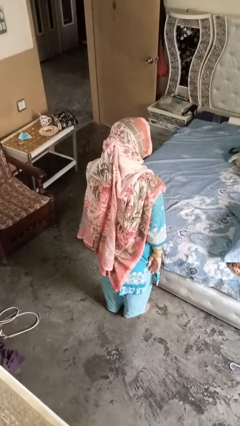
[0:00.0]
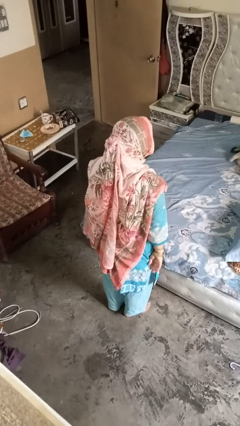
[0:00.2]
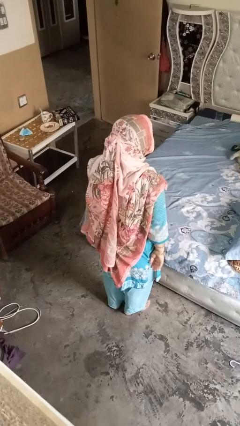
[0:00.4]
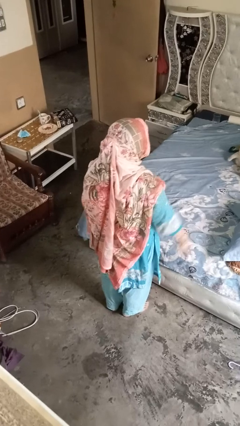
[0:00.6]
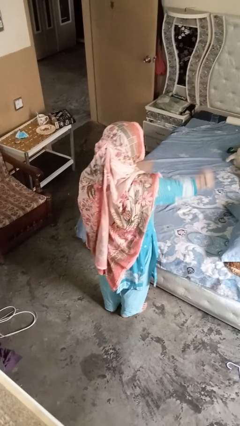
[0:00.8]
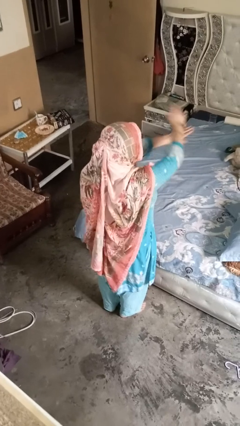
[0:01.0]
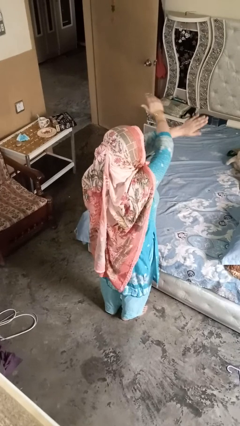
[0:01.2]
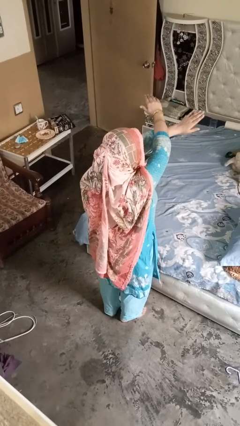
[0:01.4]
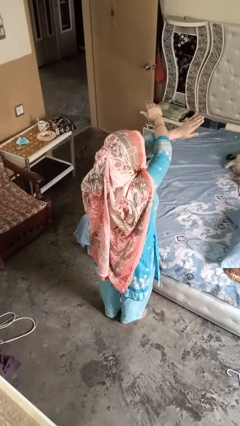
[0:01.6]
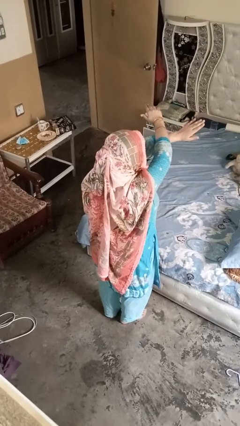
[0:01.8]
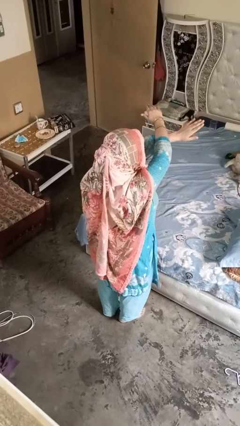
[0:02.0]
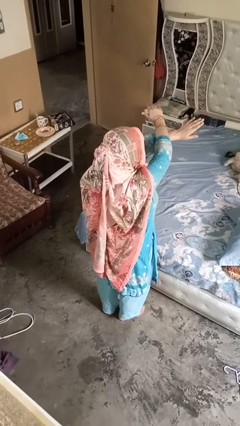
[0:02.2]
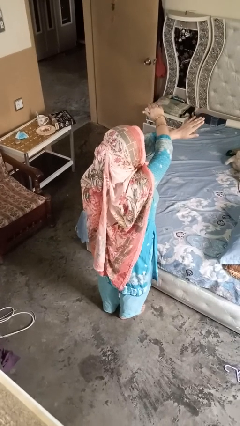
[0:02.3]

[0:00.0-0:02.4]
person gestures arms x

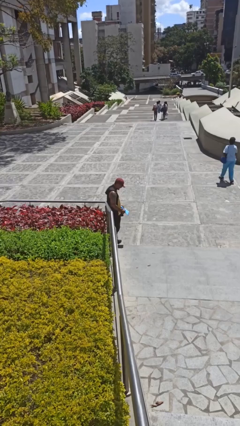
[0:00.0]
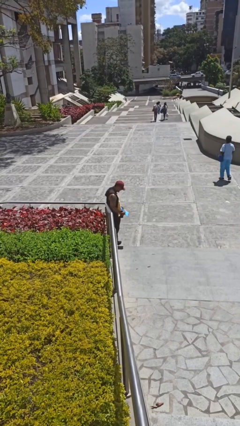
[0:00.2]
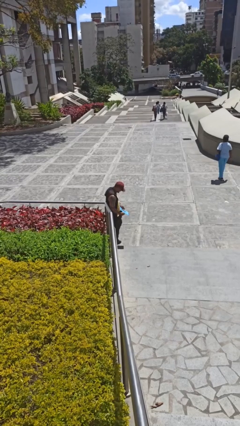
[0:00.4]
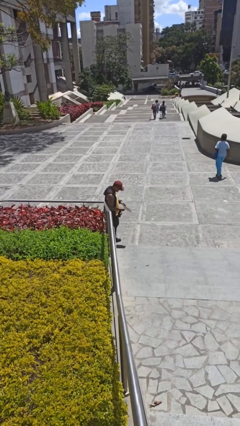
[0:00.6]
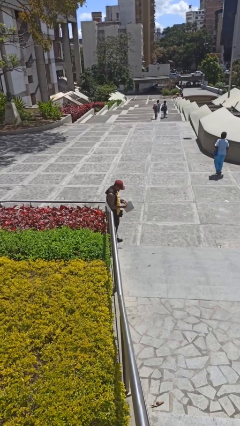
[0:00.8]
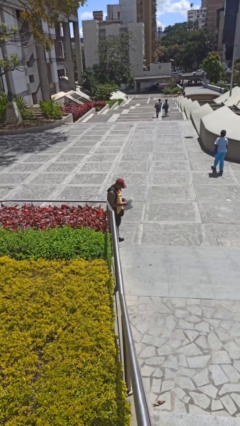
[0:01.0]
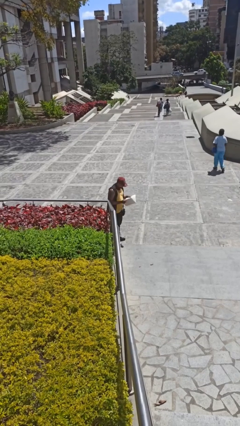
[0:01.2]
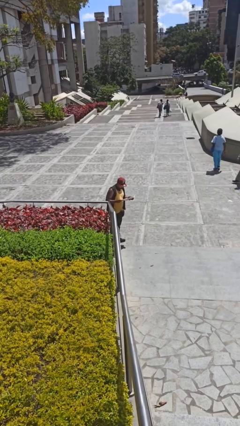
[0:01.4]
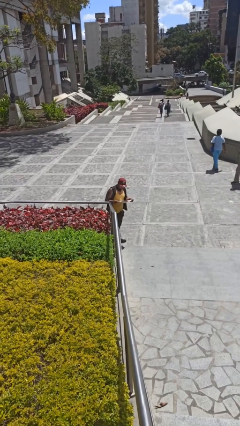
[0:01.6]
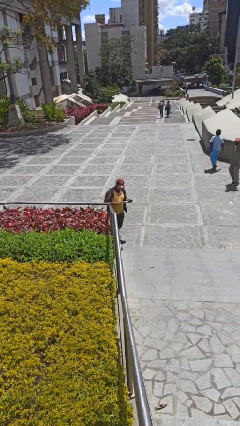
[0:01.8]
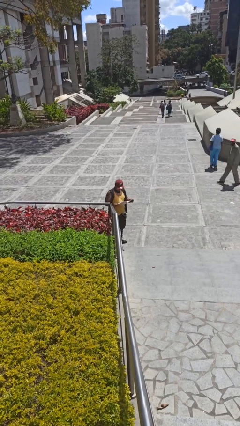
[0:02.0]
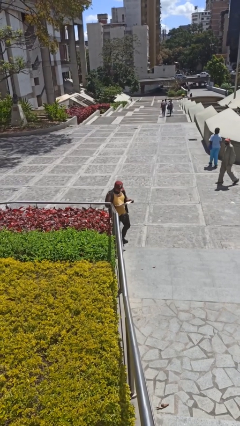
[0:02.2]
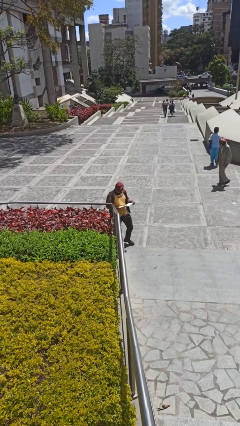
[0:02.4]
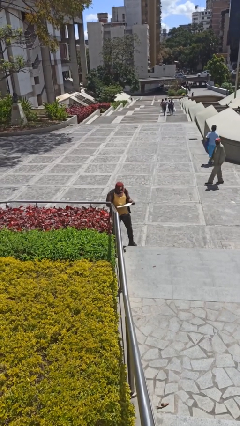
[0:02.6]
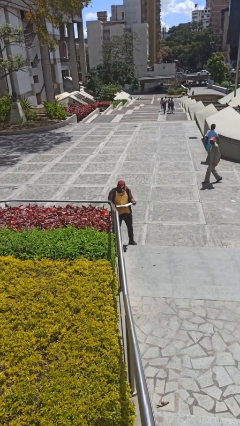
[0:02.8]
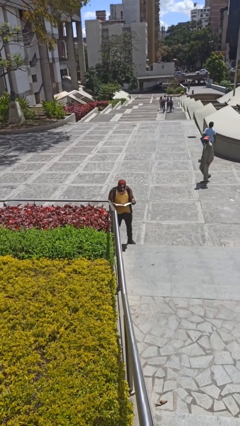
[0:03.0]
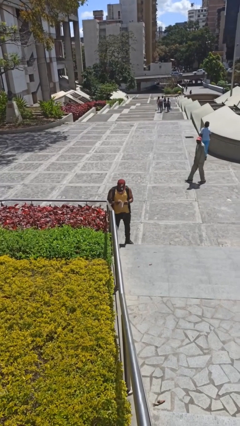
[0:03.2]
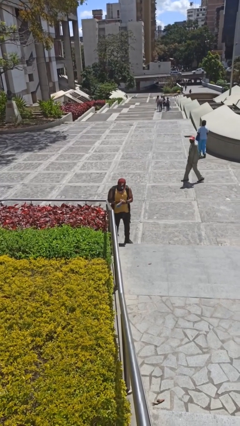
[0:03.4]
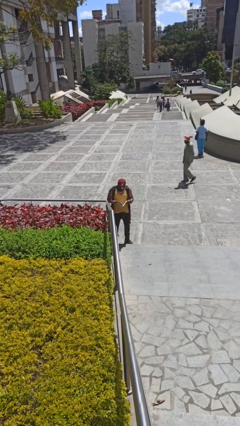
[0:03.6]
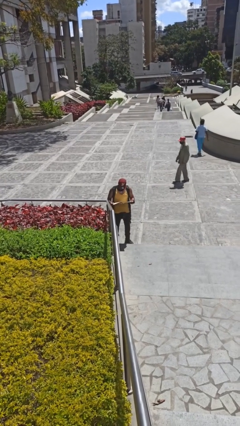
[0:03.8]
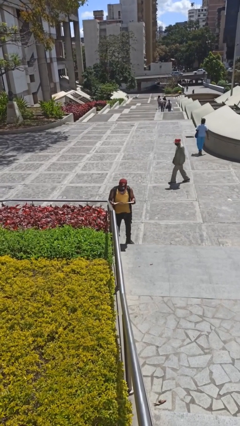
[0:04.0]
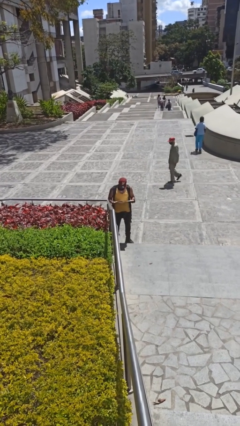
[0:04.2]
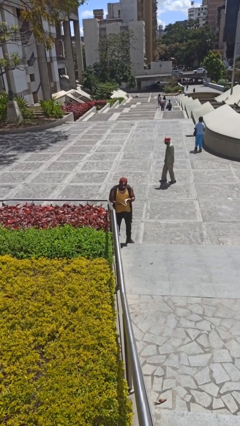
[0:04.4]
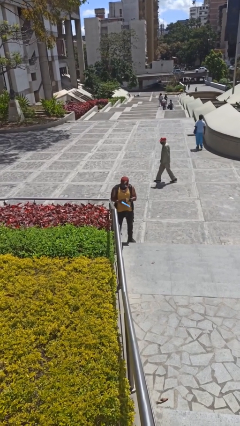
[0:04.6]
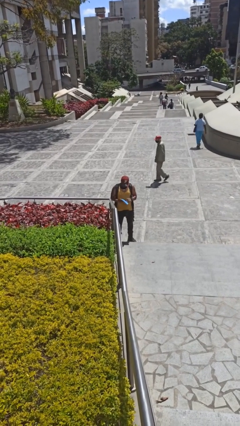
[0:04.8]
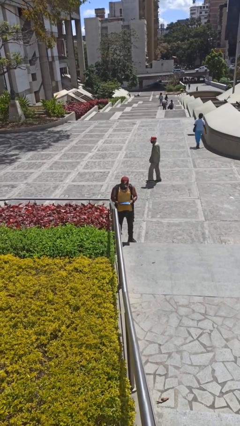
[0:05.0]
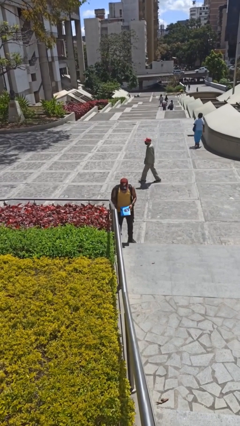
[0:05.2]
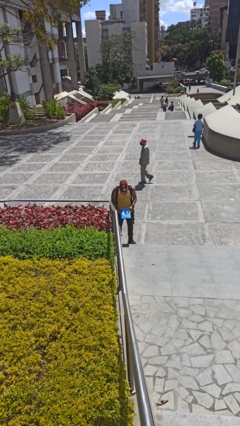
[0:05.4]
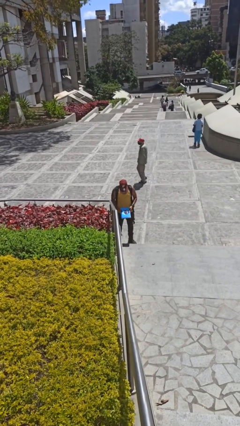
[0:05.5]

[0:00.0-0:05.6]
person reads document

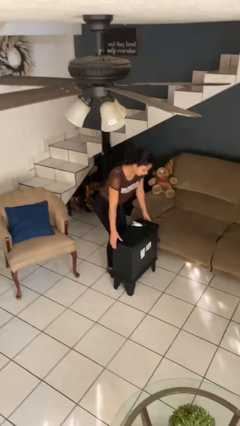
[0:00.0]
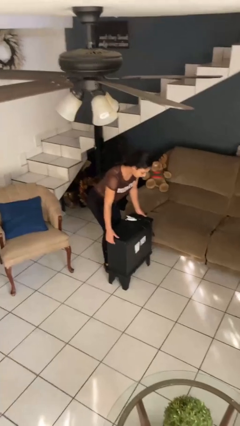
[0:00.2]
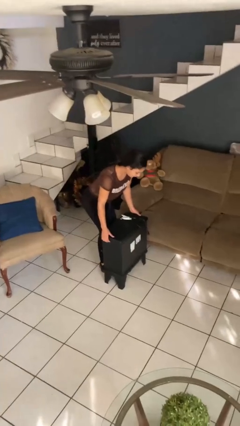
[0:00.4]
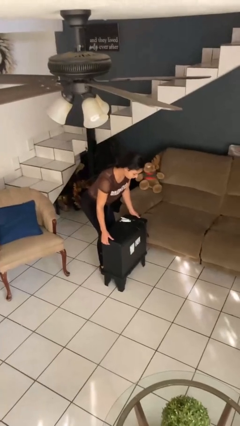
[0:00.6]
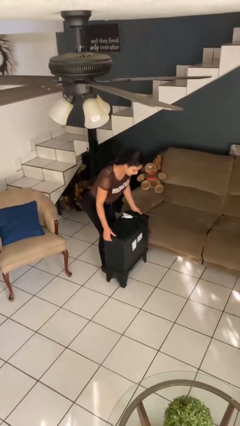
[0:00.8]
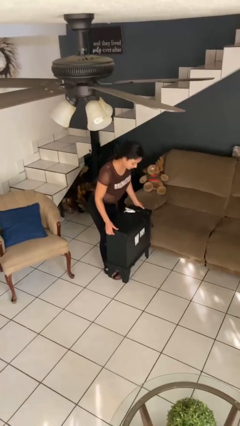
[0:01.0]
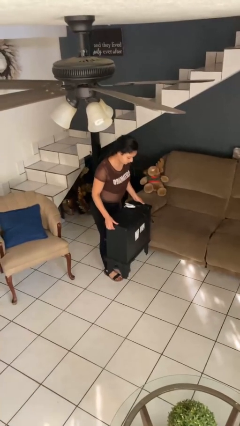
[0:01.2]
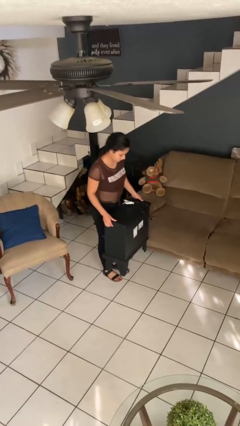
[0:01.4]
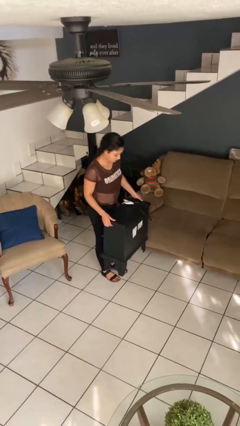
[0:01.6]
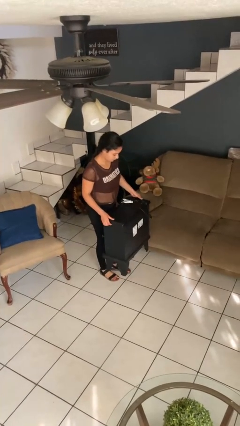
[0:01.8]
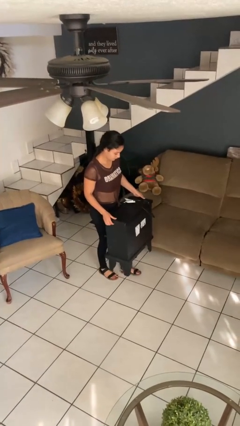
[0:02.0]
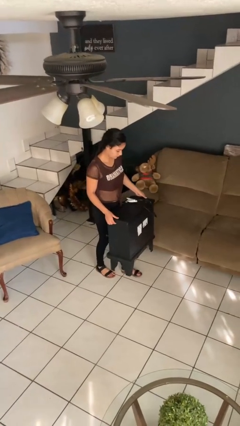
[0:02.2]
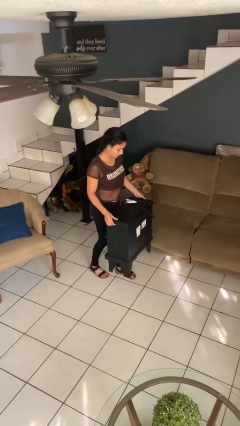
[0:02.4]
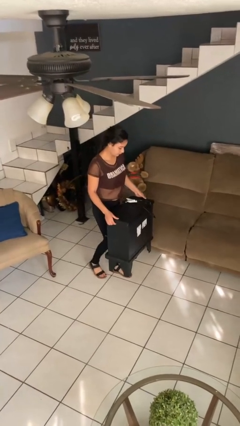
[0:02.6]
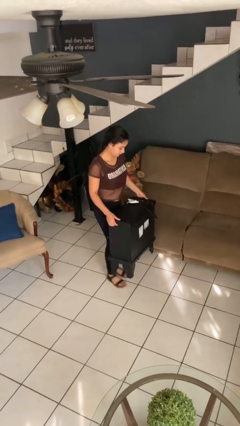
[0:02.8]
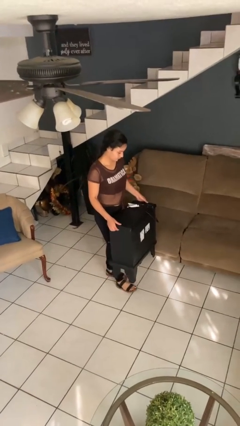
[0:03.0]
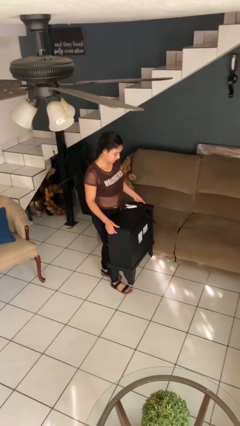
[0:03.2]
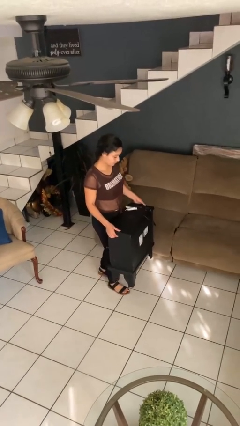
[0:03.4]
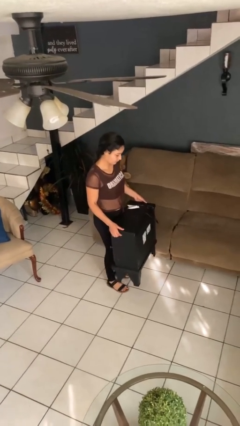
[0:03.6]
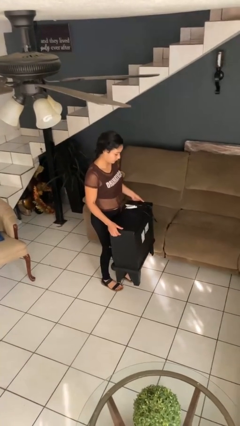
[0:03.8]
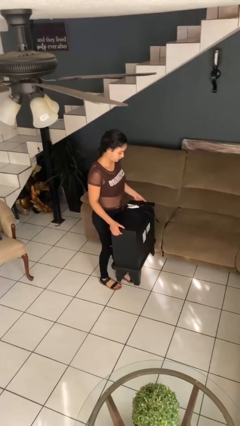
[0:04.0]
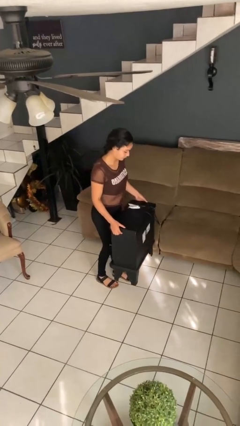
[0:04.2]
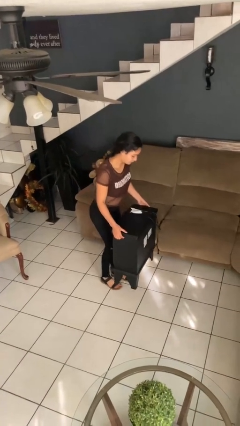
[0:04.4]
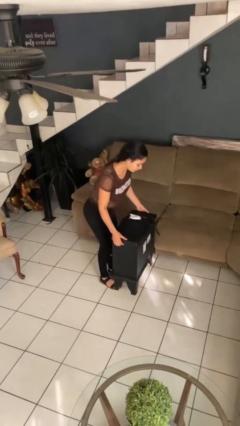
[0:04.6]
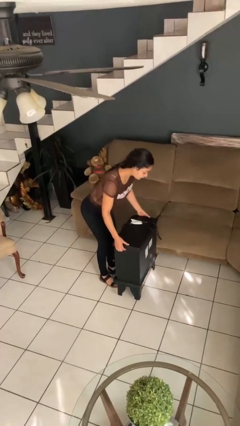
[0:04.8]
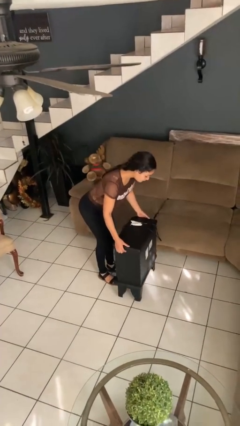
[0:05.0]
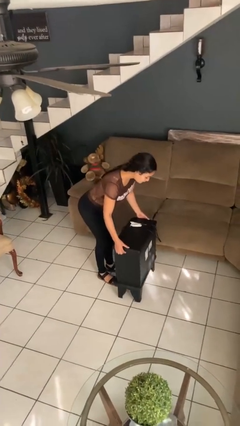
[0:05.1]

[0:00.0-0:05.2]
person carries furniture

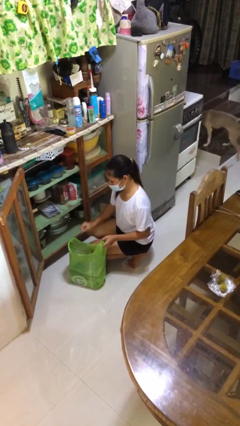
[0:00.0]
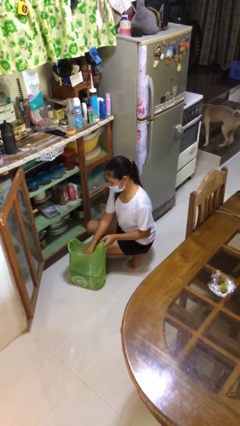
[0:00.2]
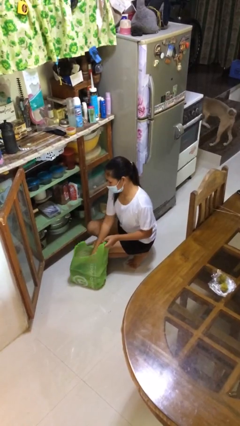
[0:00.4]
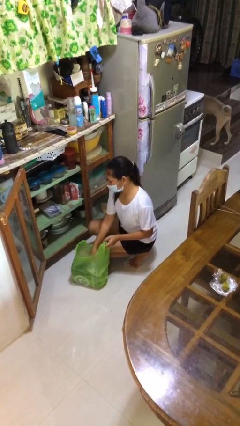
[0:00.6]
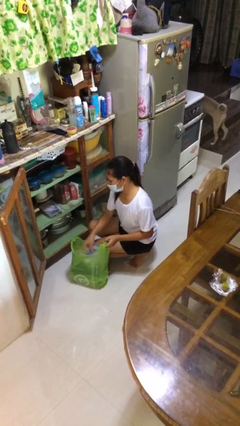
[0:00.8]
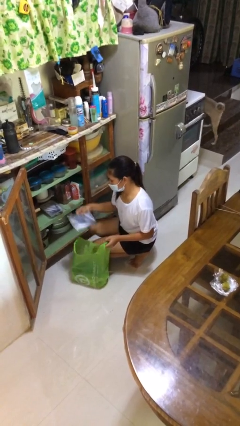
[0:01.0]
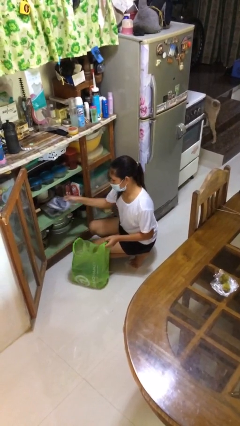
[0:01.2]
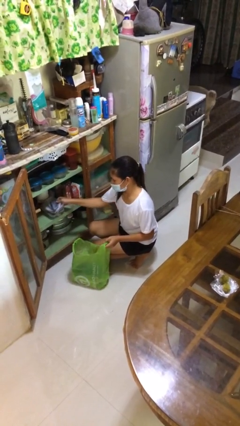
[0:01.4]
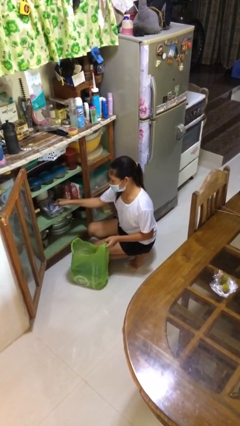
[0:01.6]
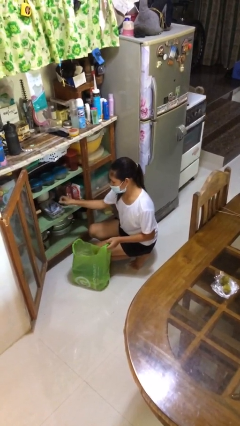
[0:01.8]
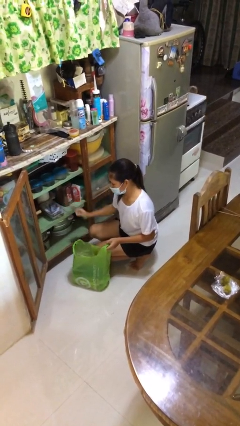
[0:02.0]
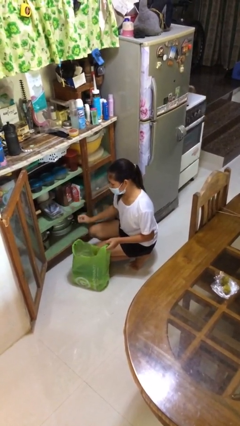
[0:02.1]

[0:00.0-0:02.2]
person loads groceries into cabinet

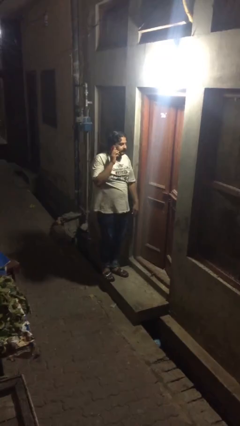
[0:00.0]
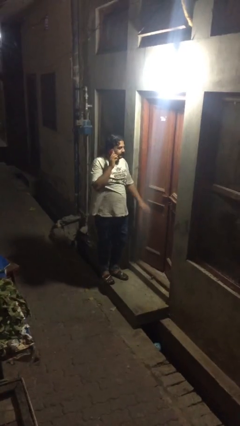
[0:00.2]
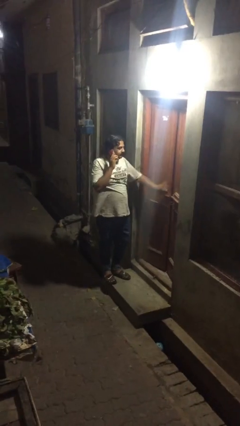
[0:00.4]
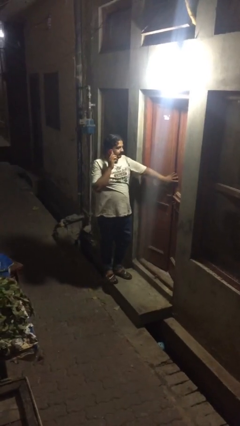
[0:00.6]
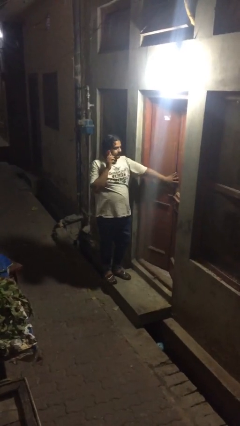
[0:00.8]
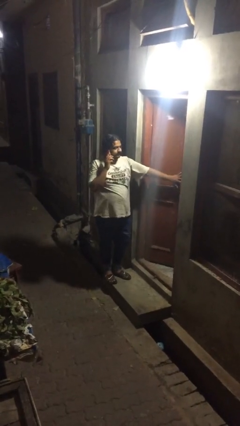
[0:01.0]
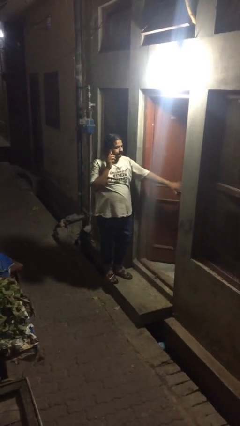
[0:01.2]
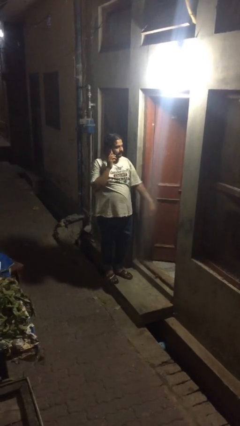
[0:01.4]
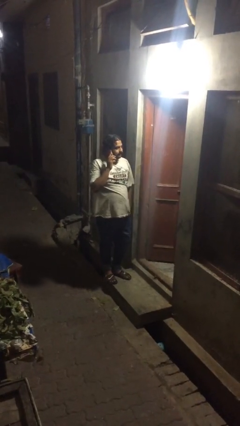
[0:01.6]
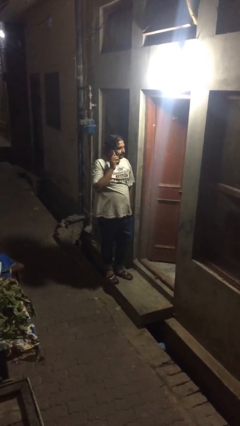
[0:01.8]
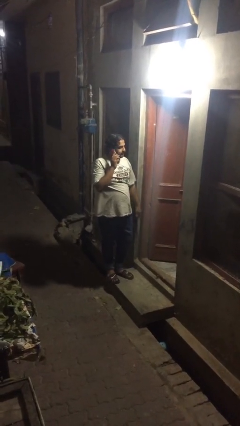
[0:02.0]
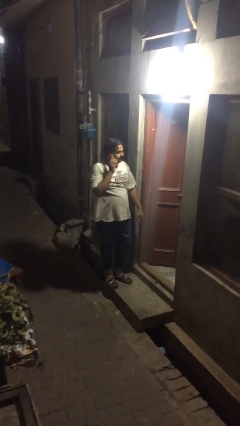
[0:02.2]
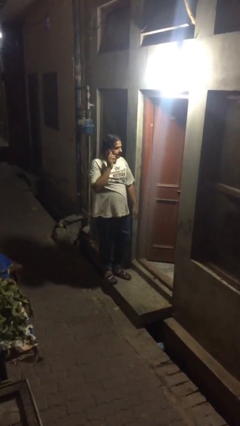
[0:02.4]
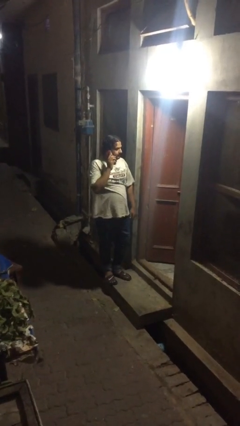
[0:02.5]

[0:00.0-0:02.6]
person opens facility door
